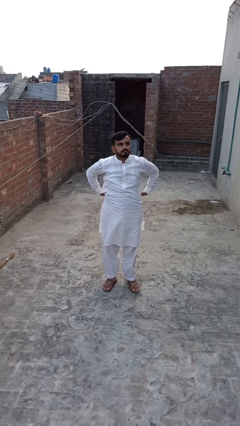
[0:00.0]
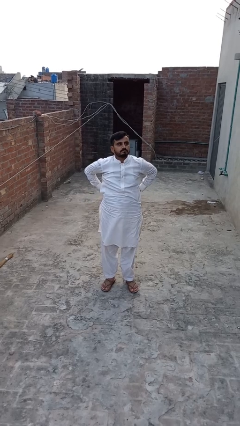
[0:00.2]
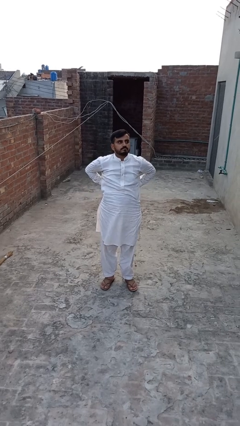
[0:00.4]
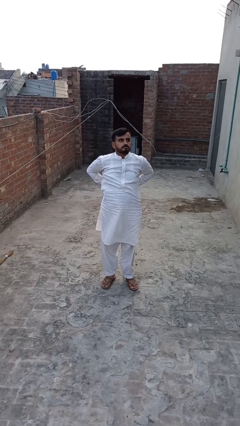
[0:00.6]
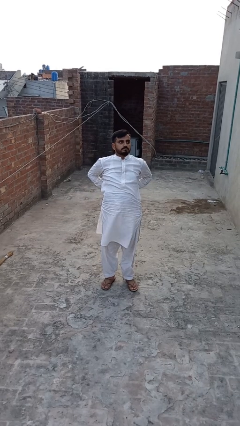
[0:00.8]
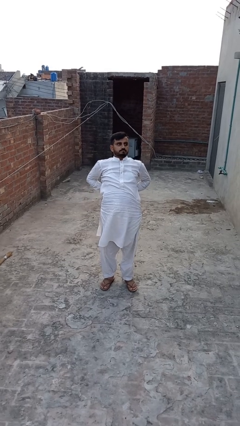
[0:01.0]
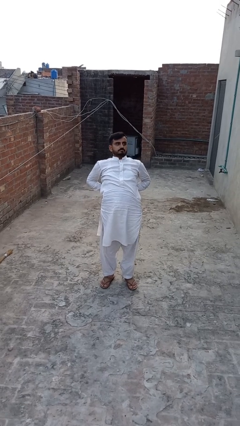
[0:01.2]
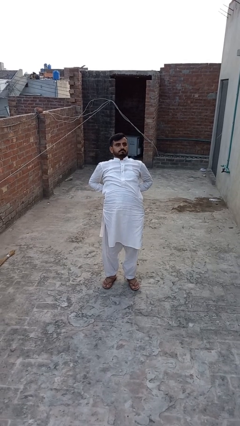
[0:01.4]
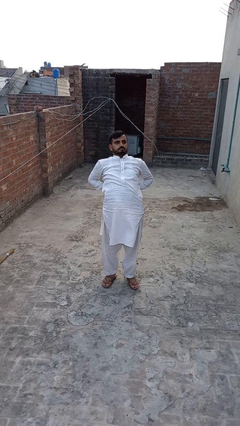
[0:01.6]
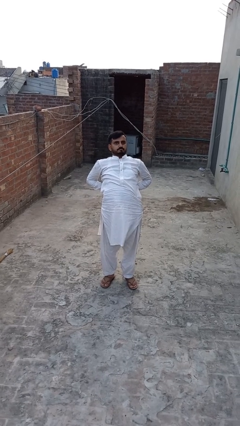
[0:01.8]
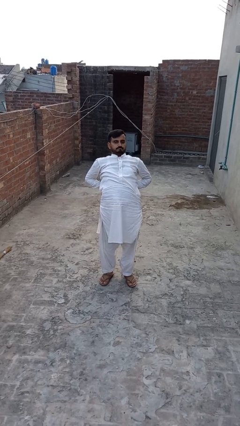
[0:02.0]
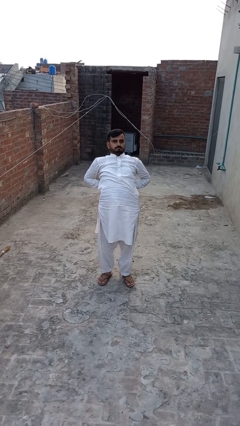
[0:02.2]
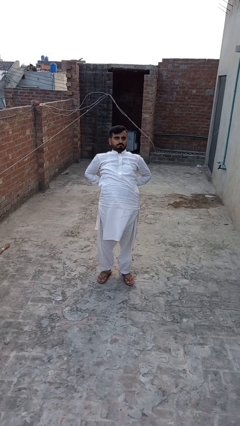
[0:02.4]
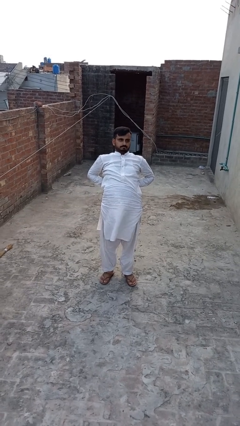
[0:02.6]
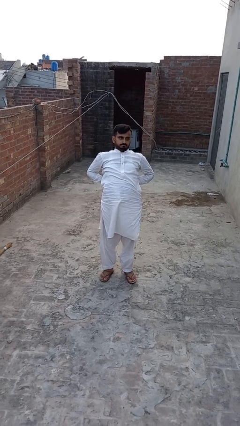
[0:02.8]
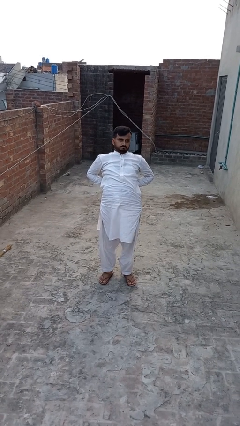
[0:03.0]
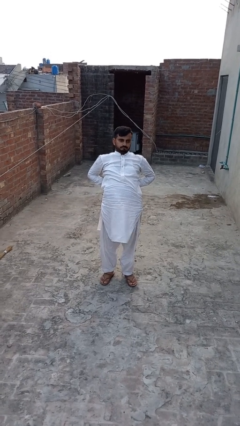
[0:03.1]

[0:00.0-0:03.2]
person stretches back

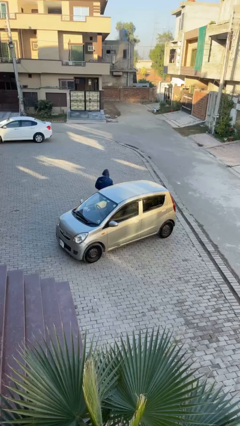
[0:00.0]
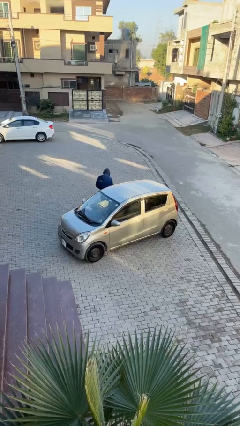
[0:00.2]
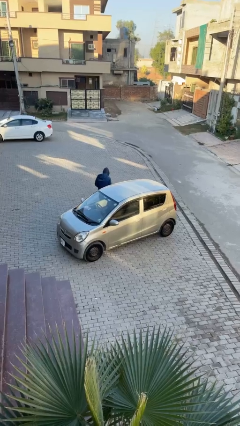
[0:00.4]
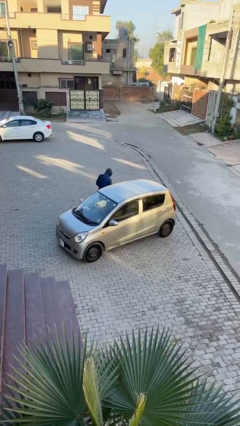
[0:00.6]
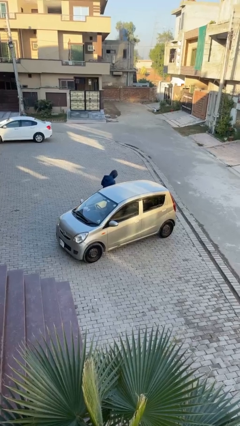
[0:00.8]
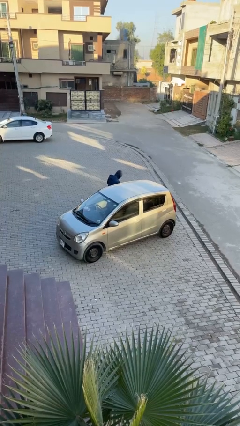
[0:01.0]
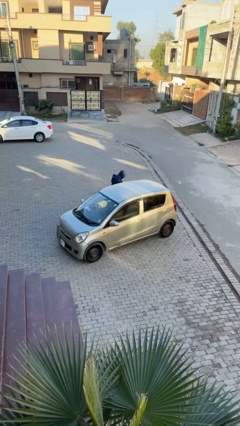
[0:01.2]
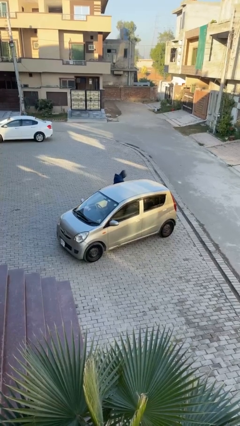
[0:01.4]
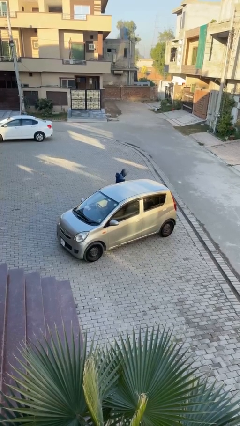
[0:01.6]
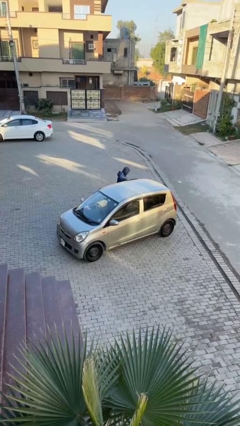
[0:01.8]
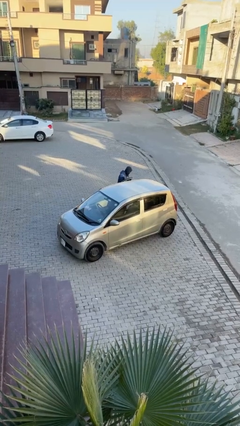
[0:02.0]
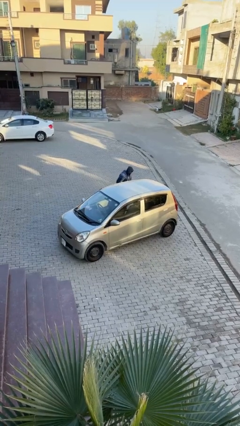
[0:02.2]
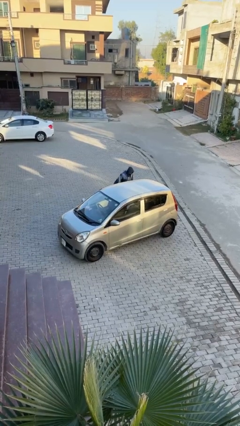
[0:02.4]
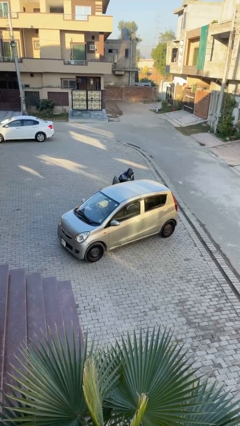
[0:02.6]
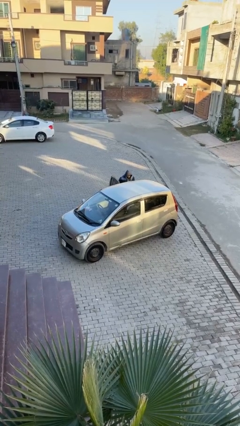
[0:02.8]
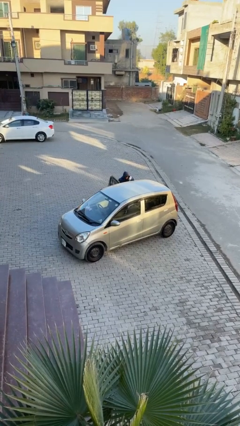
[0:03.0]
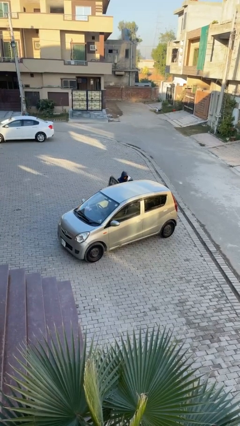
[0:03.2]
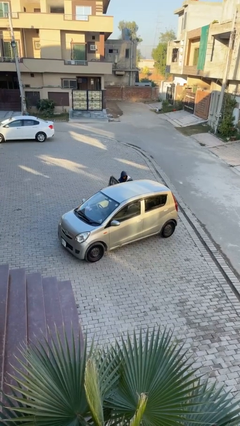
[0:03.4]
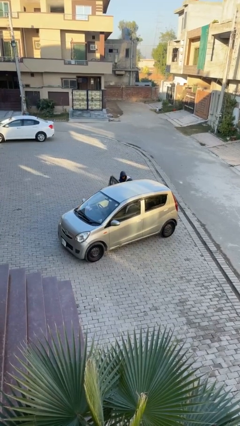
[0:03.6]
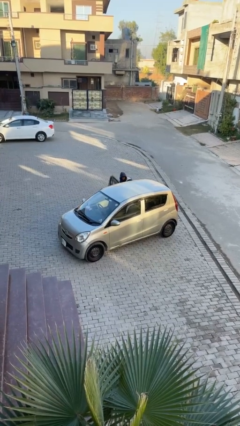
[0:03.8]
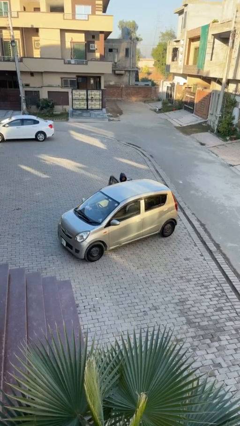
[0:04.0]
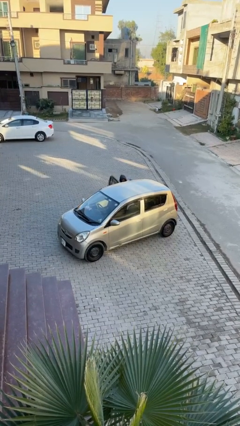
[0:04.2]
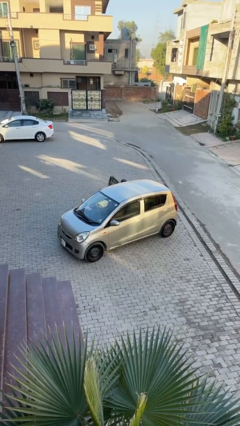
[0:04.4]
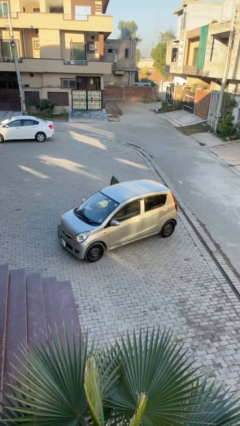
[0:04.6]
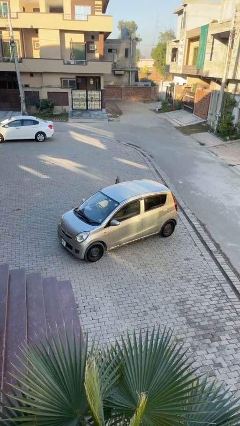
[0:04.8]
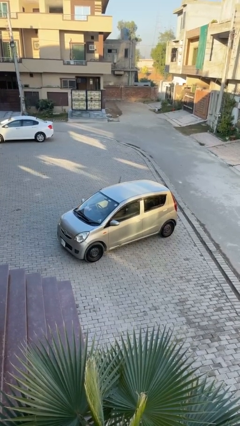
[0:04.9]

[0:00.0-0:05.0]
car picks up person

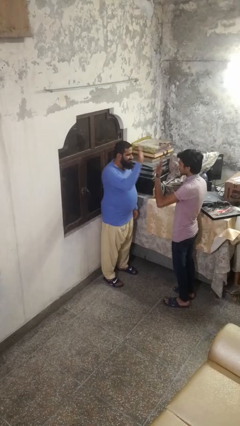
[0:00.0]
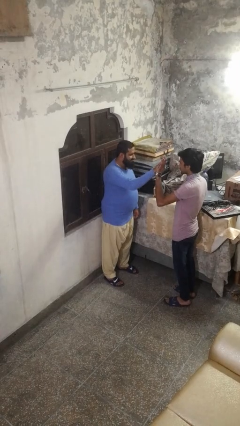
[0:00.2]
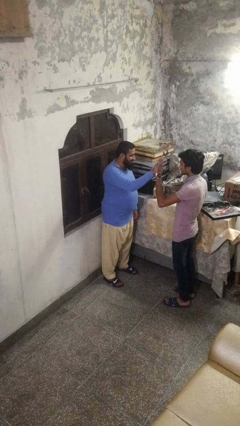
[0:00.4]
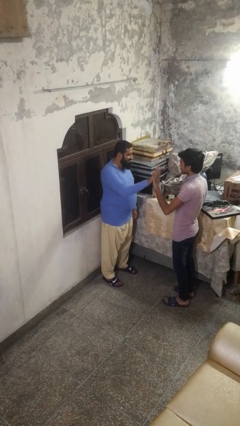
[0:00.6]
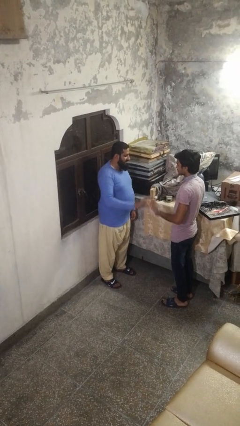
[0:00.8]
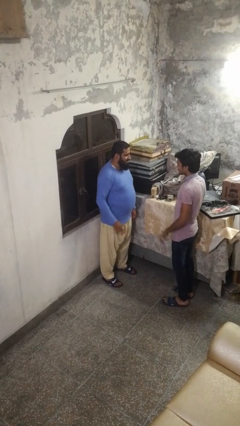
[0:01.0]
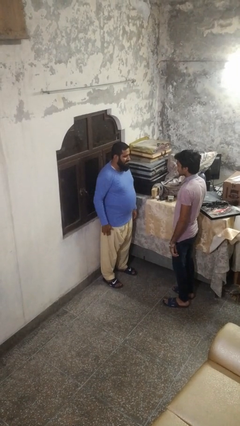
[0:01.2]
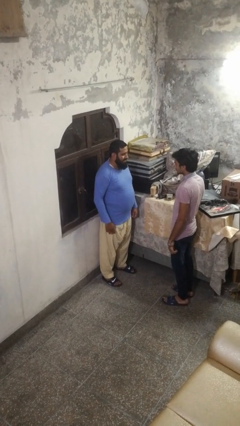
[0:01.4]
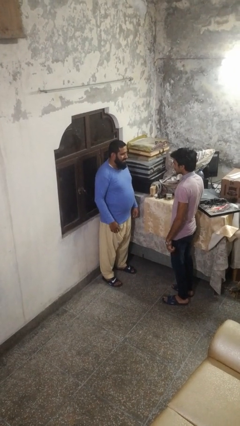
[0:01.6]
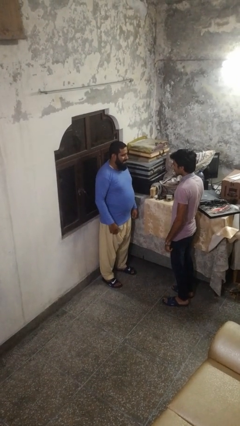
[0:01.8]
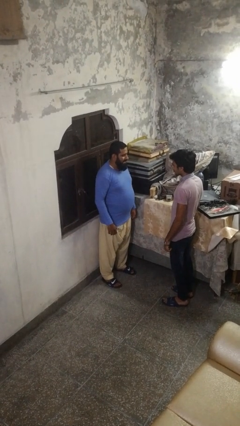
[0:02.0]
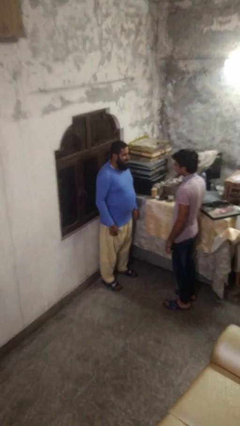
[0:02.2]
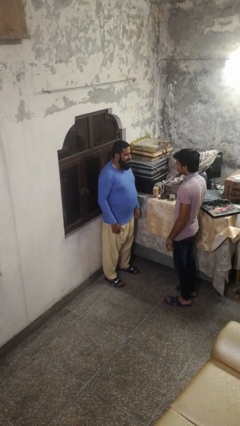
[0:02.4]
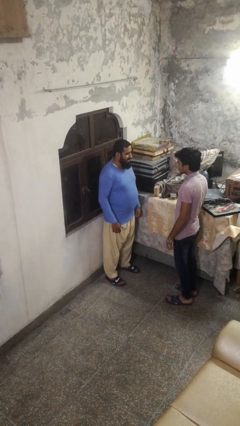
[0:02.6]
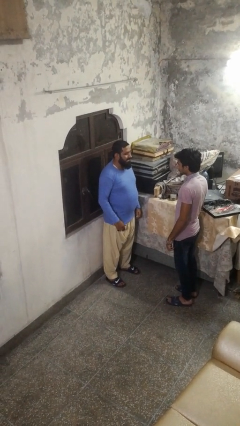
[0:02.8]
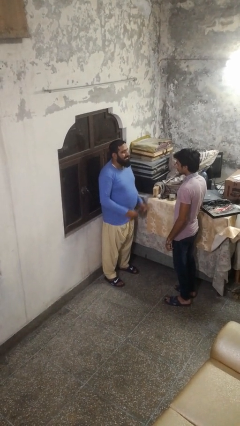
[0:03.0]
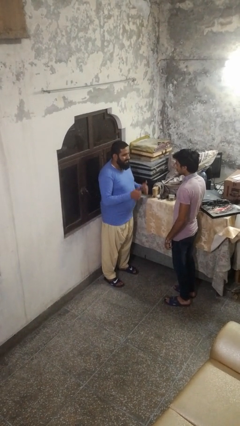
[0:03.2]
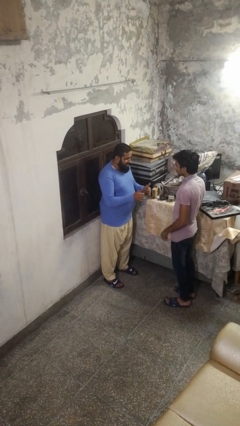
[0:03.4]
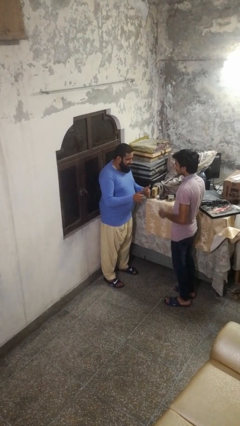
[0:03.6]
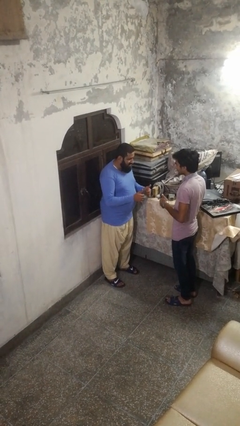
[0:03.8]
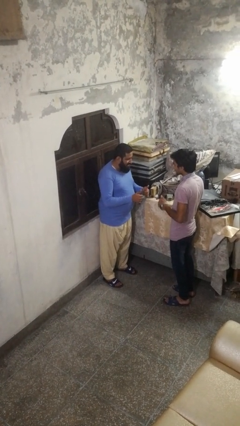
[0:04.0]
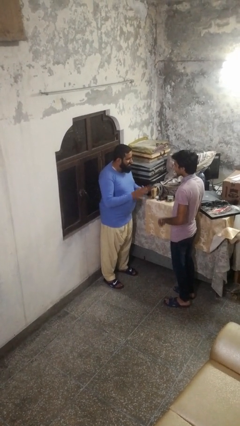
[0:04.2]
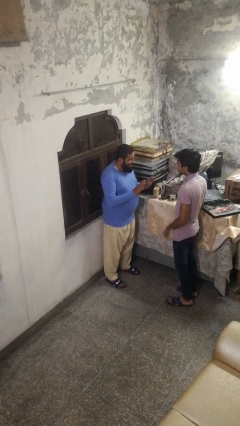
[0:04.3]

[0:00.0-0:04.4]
person highfives hand

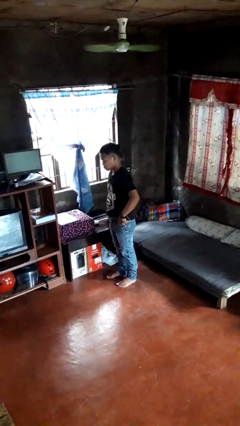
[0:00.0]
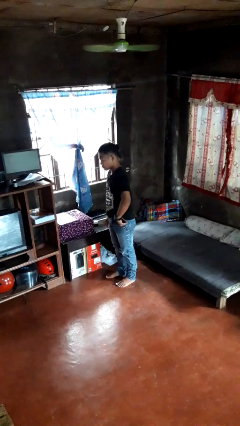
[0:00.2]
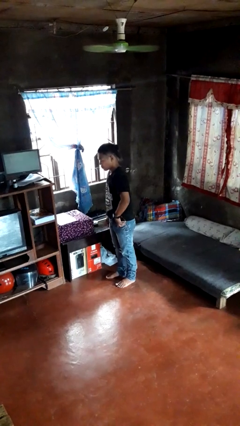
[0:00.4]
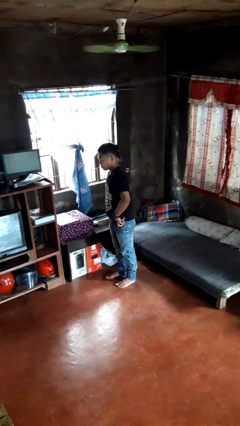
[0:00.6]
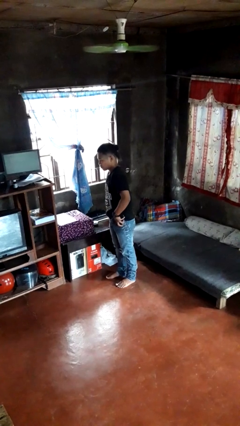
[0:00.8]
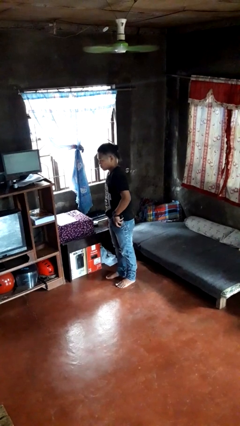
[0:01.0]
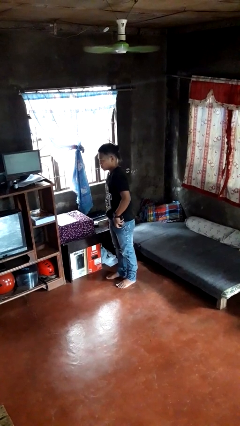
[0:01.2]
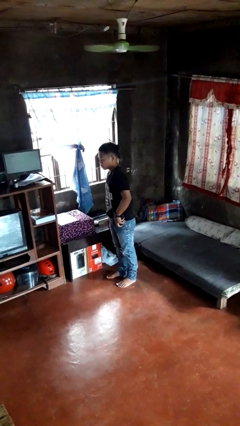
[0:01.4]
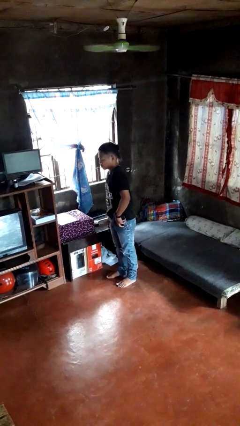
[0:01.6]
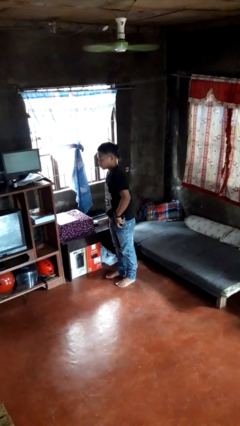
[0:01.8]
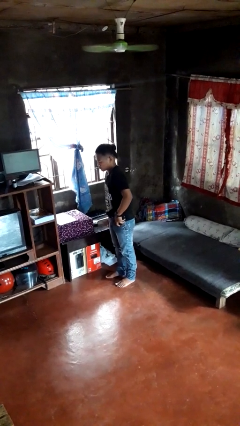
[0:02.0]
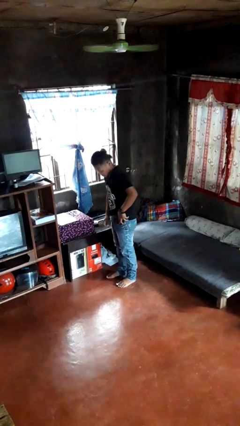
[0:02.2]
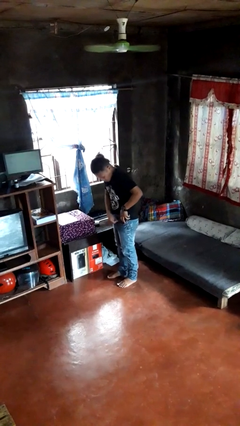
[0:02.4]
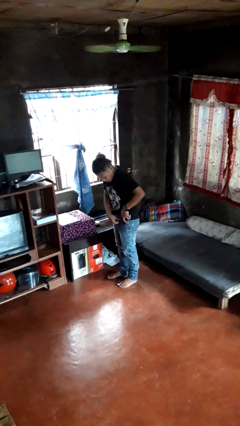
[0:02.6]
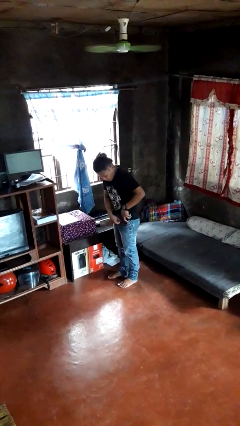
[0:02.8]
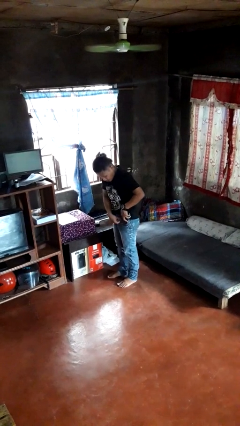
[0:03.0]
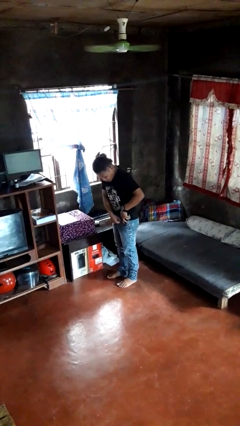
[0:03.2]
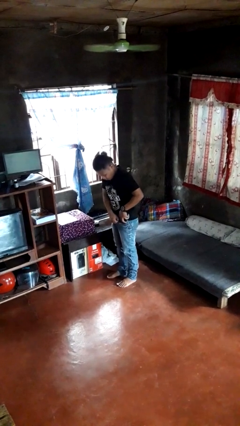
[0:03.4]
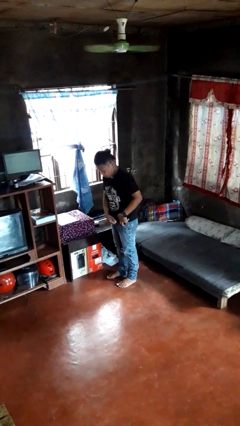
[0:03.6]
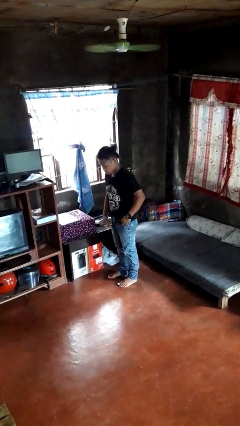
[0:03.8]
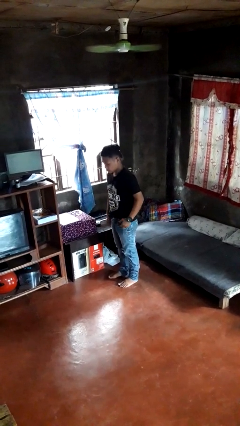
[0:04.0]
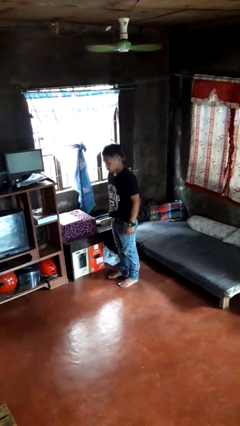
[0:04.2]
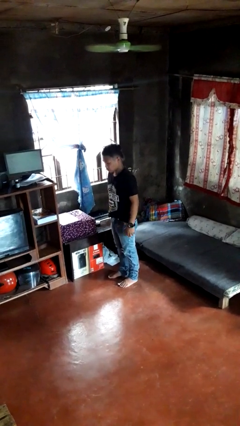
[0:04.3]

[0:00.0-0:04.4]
person puts phone into pocket

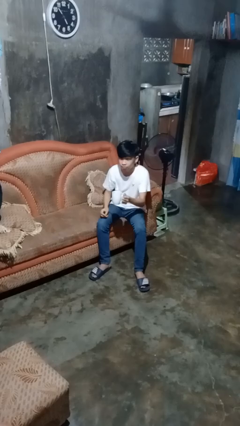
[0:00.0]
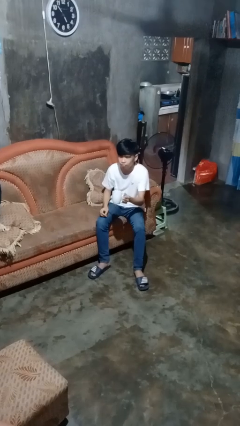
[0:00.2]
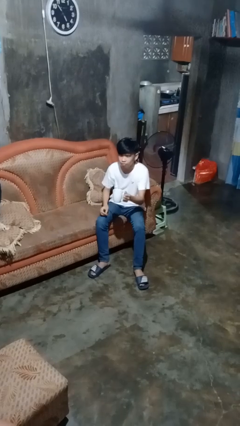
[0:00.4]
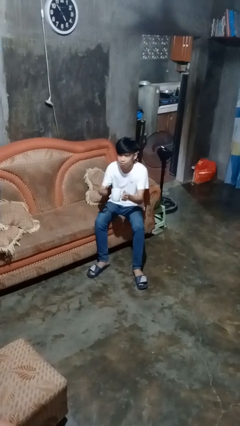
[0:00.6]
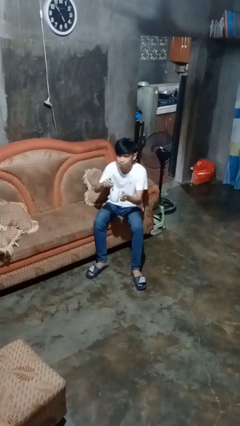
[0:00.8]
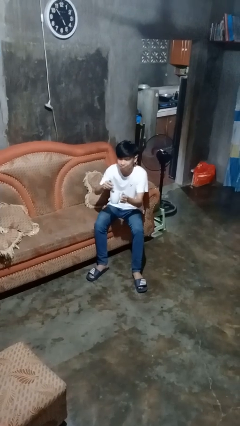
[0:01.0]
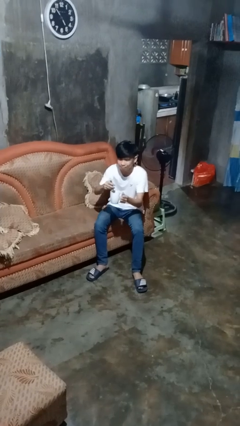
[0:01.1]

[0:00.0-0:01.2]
person stirs mug
